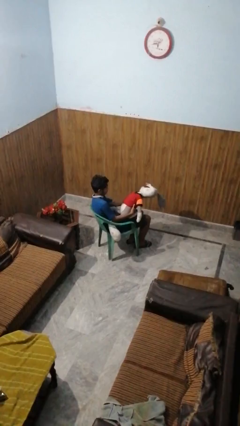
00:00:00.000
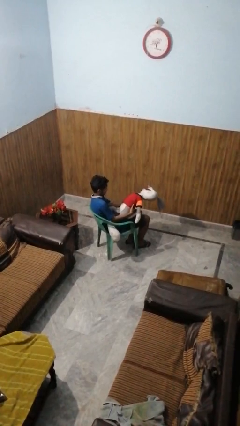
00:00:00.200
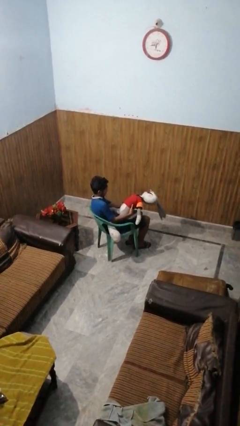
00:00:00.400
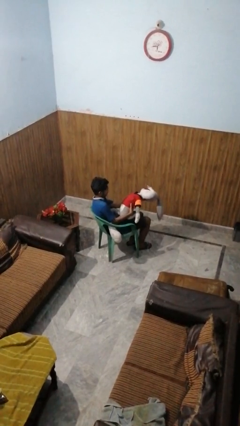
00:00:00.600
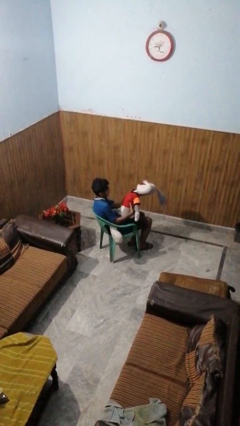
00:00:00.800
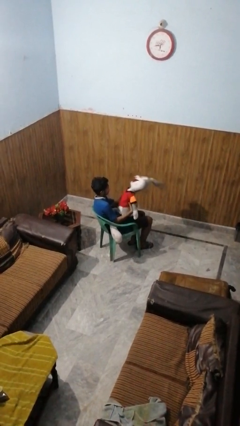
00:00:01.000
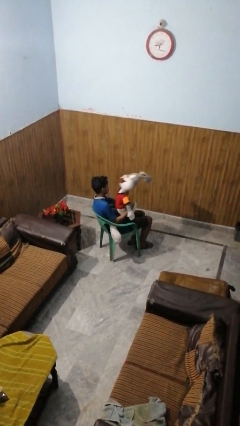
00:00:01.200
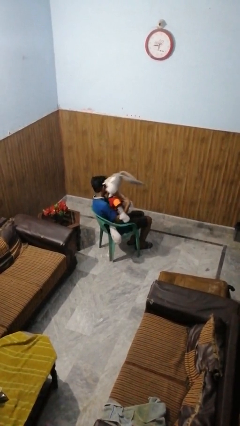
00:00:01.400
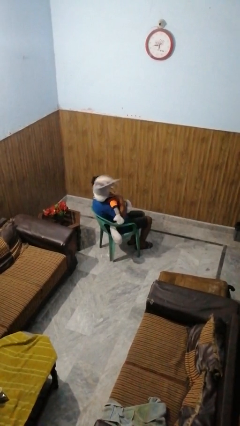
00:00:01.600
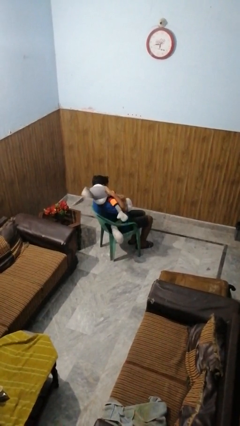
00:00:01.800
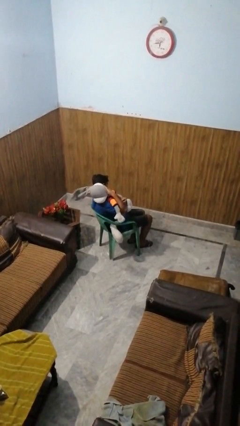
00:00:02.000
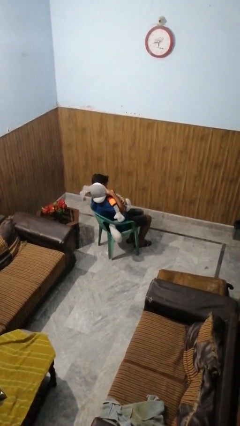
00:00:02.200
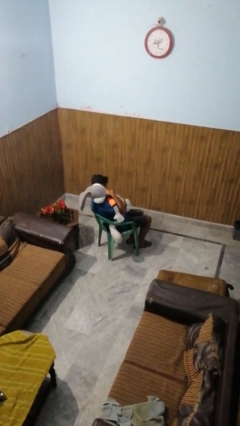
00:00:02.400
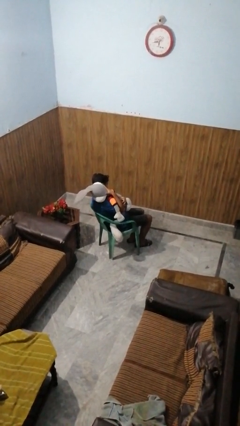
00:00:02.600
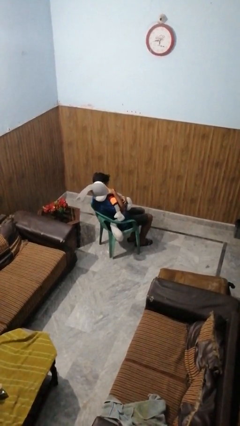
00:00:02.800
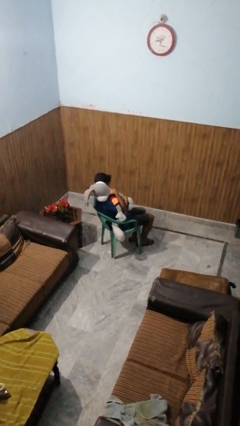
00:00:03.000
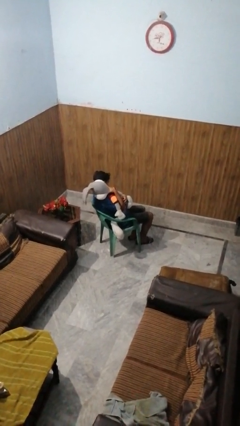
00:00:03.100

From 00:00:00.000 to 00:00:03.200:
person hugs stuffed animal

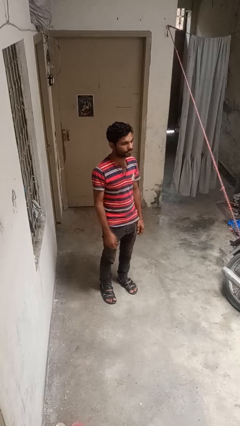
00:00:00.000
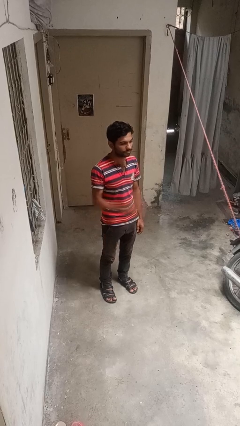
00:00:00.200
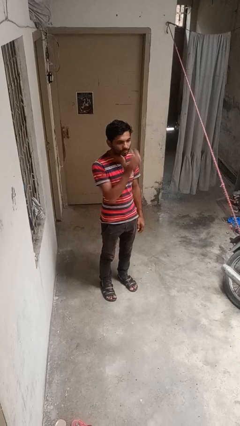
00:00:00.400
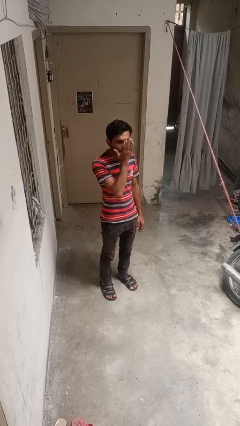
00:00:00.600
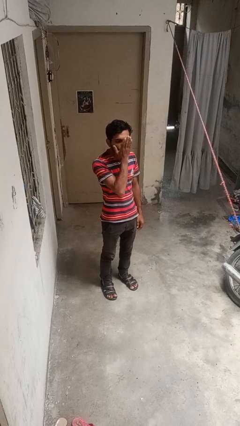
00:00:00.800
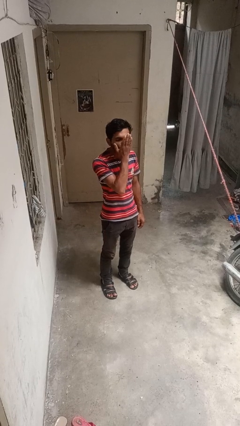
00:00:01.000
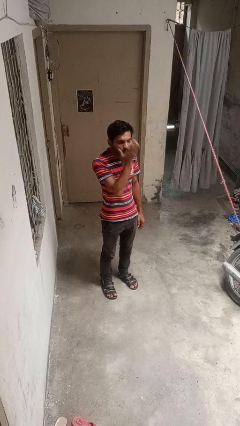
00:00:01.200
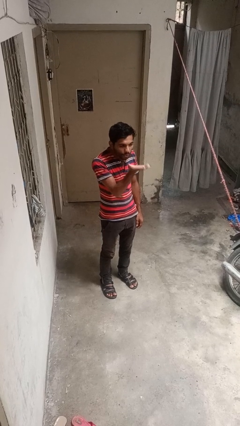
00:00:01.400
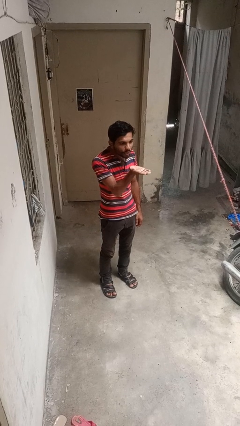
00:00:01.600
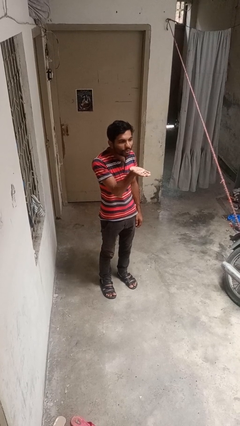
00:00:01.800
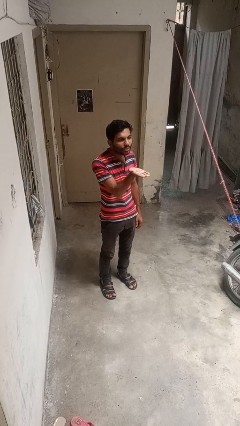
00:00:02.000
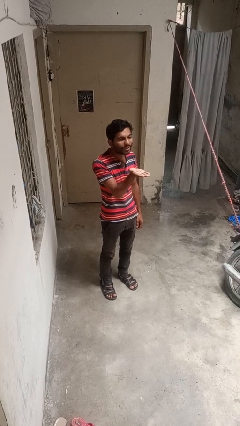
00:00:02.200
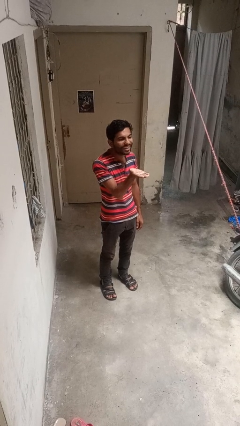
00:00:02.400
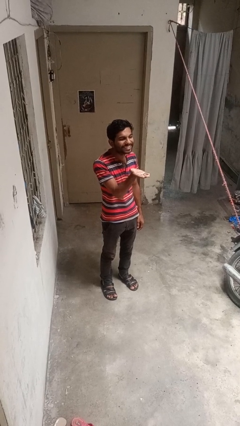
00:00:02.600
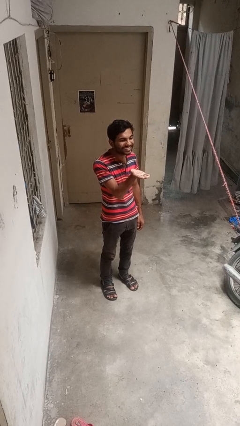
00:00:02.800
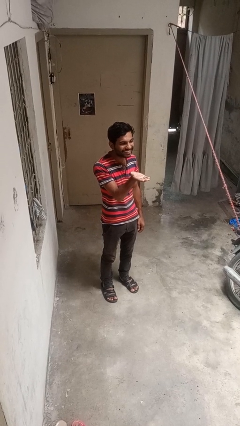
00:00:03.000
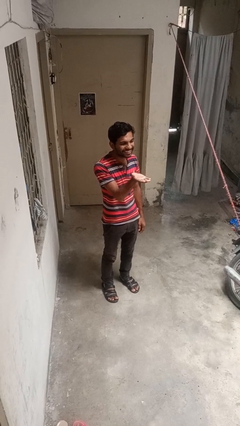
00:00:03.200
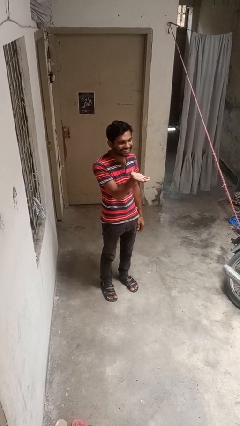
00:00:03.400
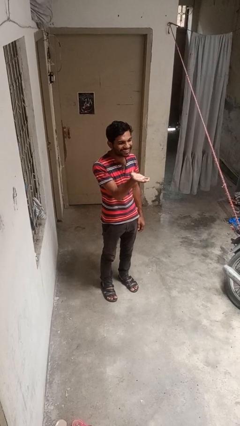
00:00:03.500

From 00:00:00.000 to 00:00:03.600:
person gestures blow kiss

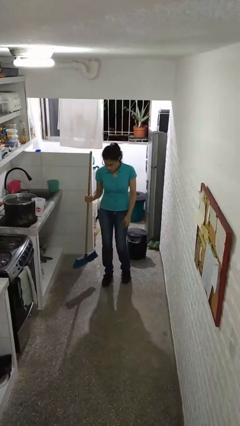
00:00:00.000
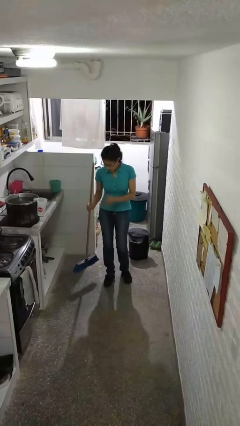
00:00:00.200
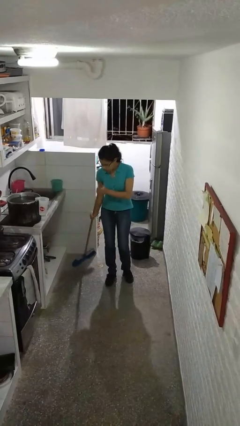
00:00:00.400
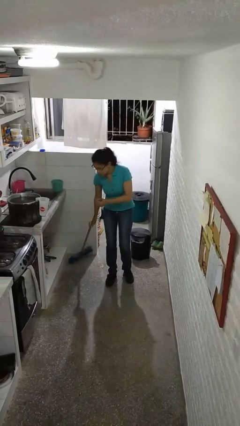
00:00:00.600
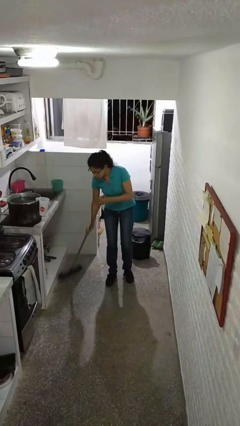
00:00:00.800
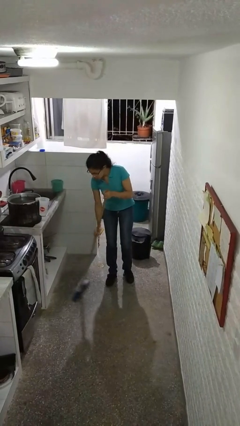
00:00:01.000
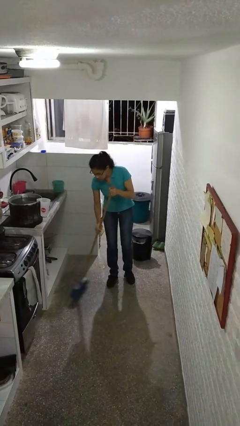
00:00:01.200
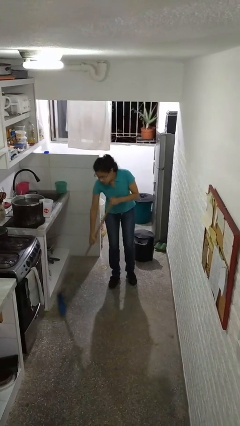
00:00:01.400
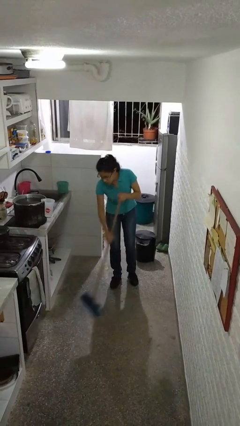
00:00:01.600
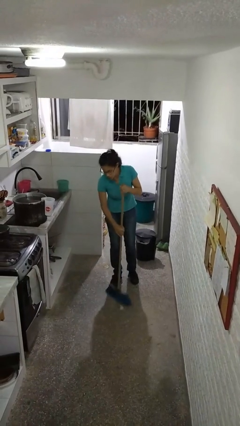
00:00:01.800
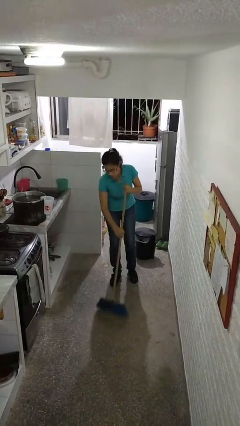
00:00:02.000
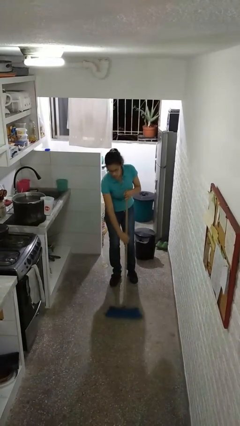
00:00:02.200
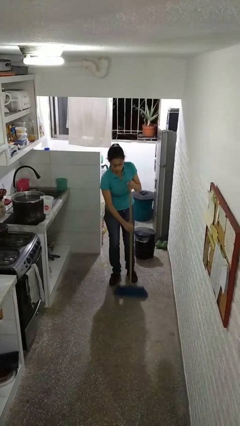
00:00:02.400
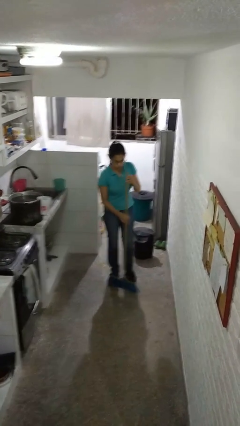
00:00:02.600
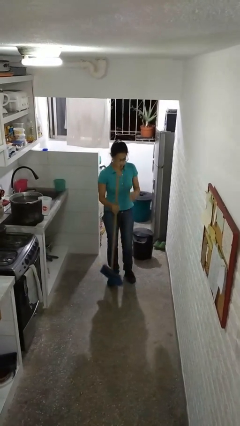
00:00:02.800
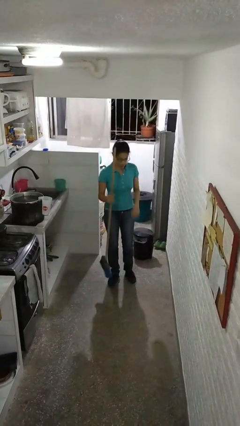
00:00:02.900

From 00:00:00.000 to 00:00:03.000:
person sweeps floor

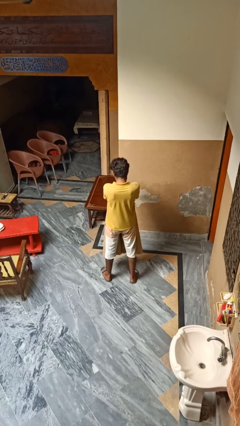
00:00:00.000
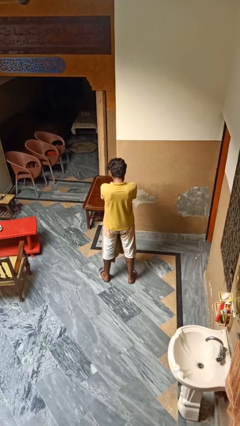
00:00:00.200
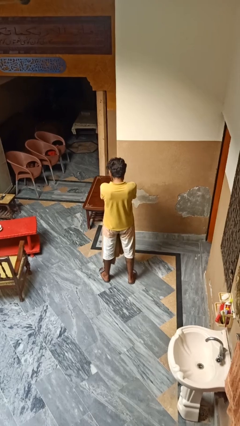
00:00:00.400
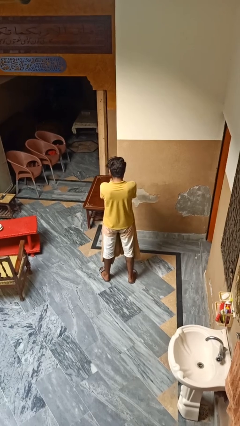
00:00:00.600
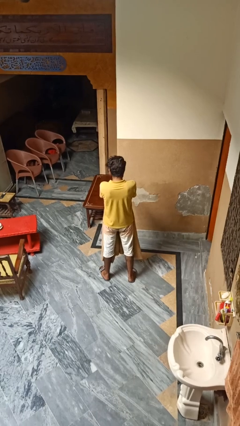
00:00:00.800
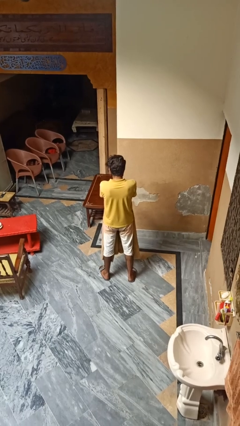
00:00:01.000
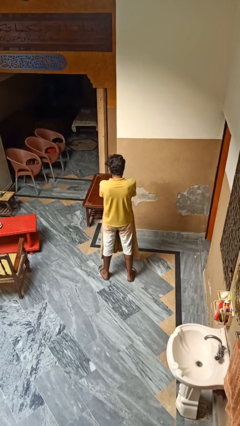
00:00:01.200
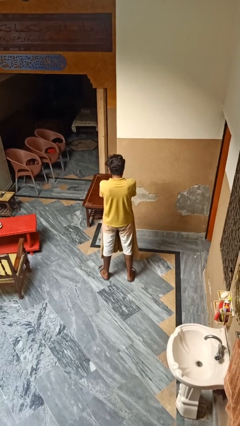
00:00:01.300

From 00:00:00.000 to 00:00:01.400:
person unfolds blanket

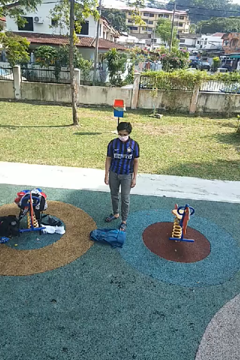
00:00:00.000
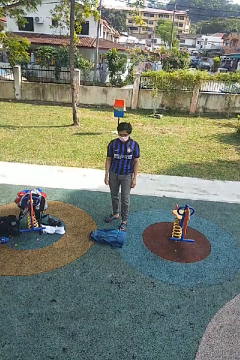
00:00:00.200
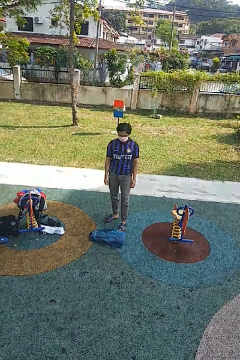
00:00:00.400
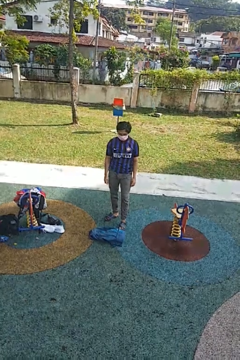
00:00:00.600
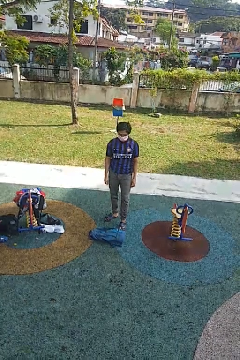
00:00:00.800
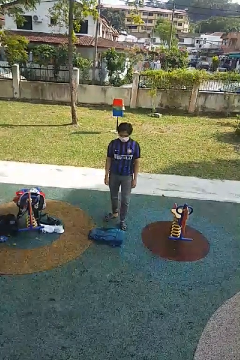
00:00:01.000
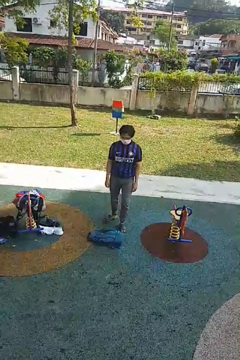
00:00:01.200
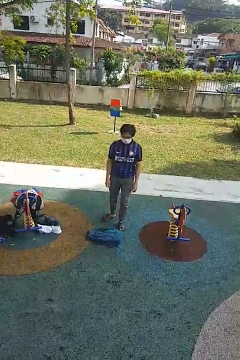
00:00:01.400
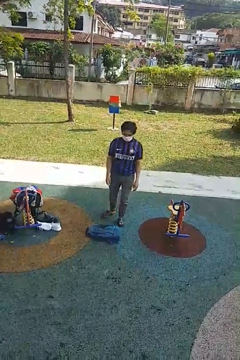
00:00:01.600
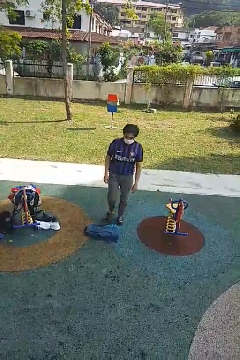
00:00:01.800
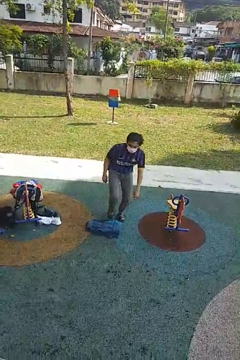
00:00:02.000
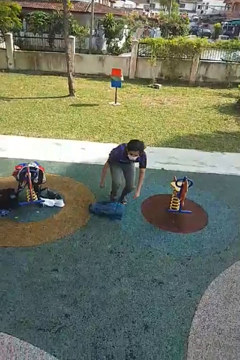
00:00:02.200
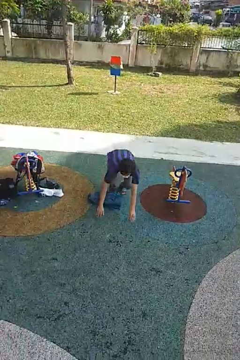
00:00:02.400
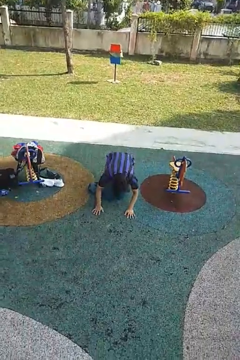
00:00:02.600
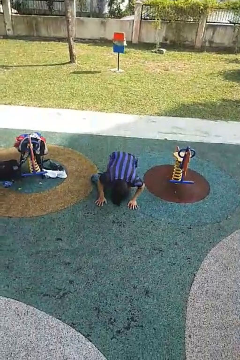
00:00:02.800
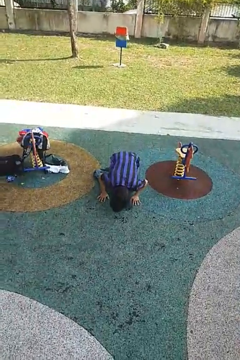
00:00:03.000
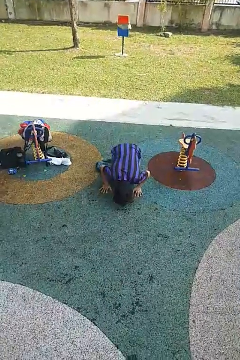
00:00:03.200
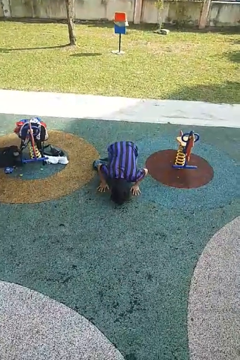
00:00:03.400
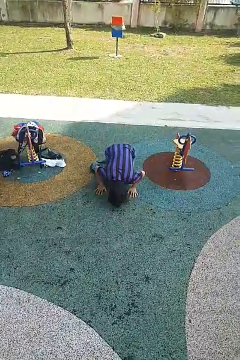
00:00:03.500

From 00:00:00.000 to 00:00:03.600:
person trips on object on floor

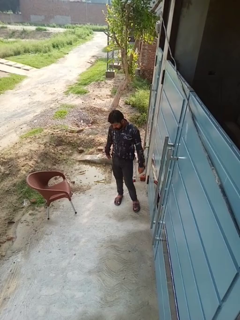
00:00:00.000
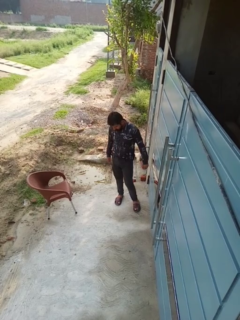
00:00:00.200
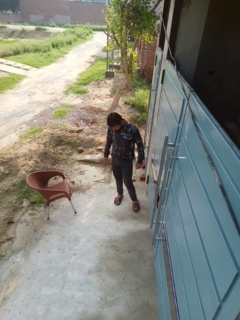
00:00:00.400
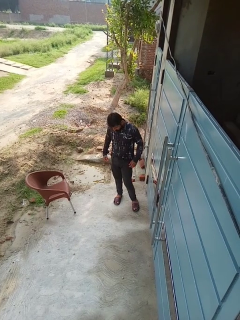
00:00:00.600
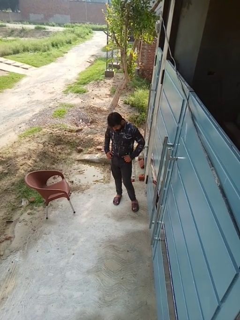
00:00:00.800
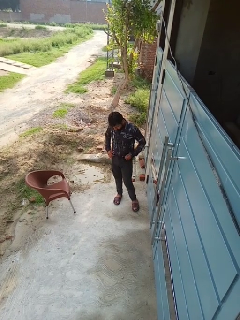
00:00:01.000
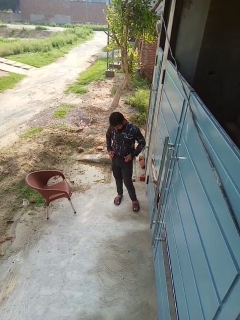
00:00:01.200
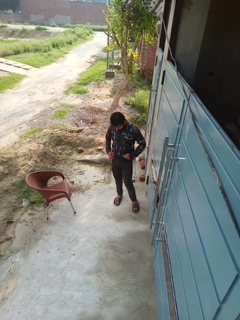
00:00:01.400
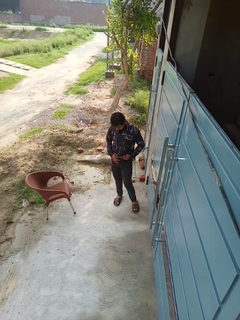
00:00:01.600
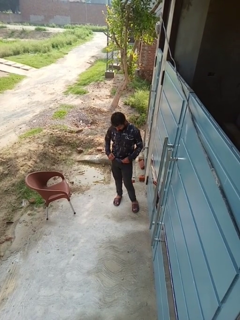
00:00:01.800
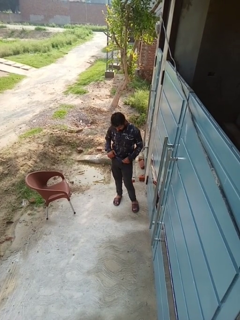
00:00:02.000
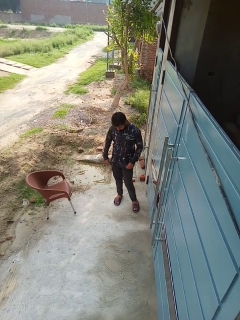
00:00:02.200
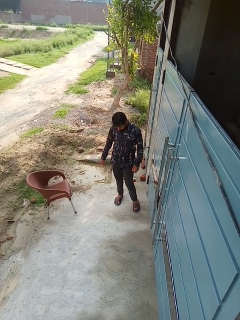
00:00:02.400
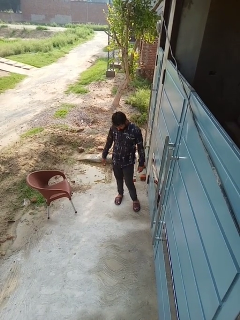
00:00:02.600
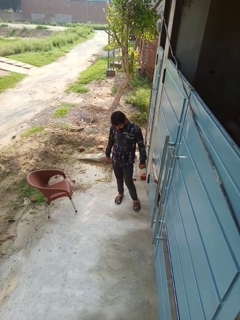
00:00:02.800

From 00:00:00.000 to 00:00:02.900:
person untucks shirt

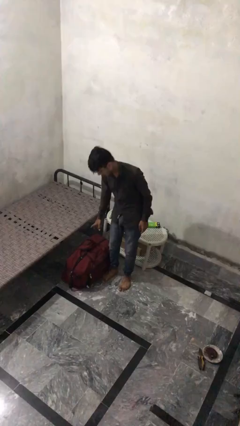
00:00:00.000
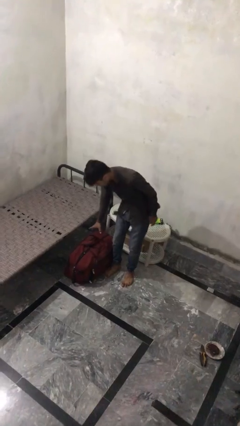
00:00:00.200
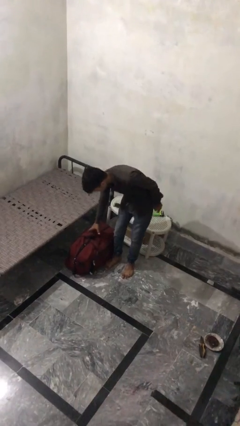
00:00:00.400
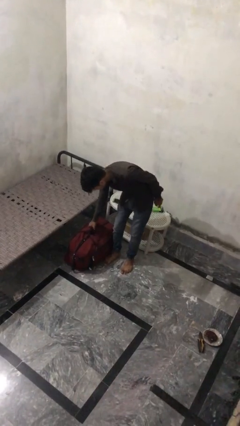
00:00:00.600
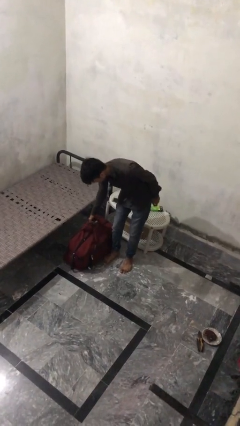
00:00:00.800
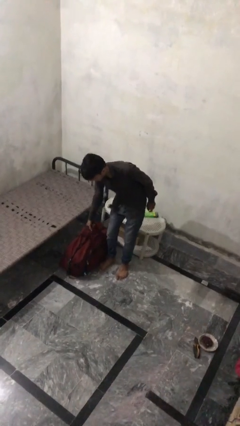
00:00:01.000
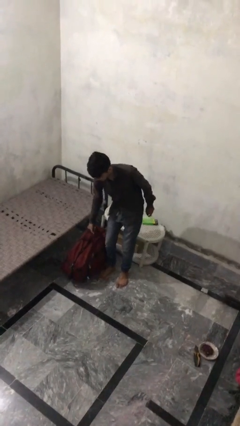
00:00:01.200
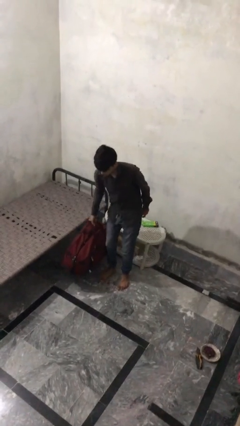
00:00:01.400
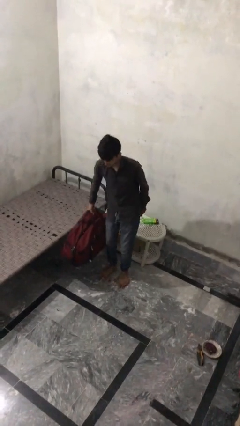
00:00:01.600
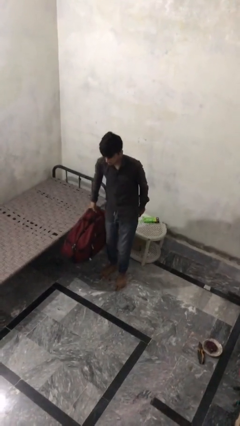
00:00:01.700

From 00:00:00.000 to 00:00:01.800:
person picks up object from floor
